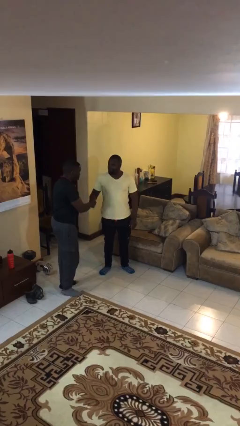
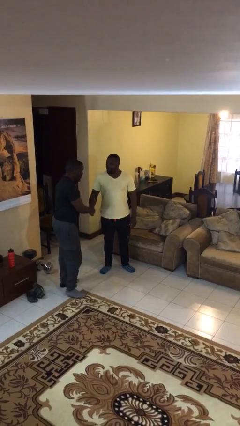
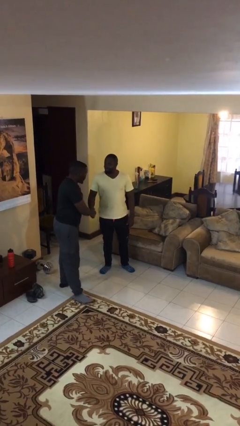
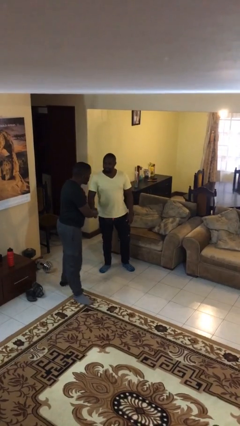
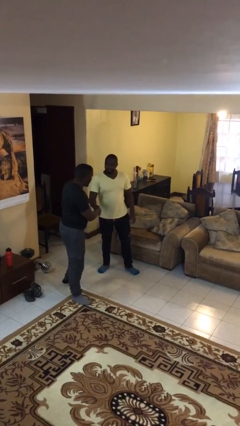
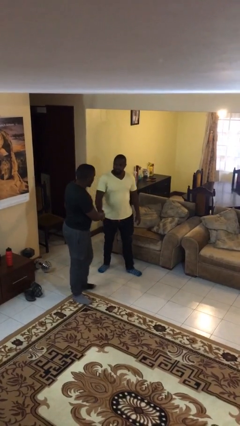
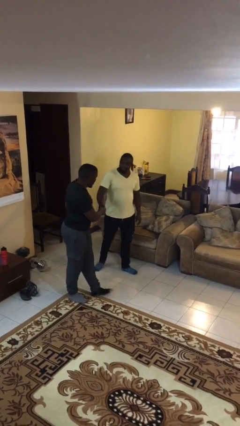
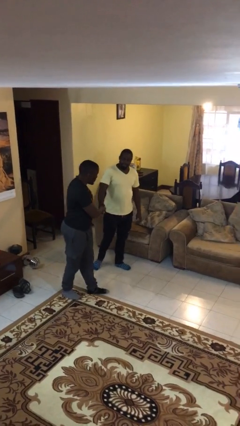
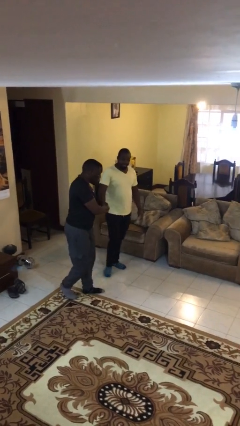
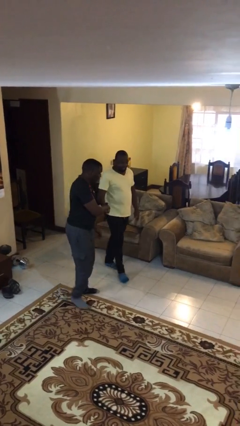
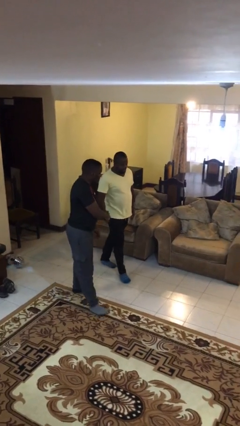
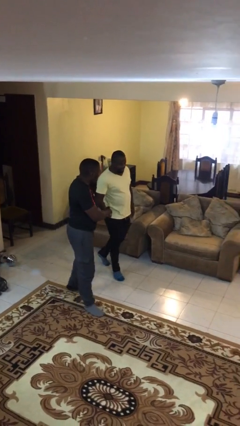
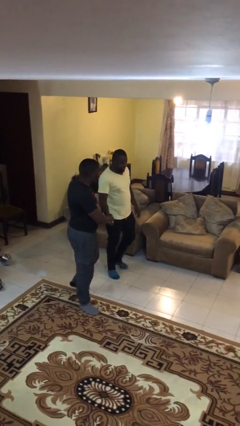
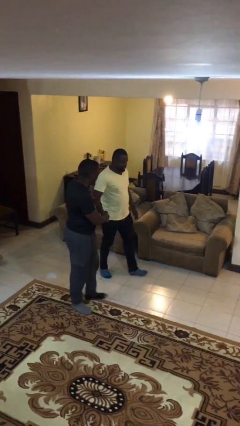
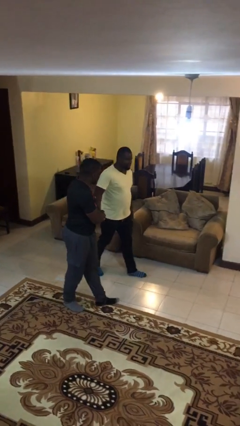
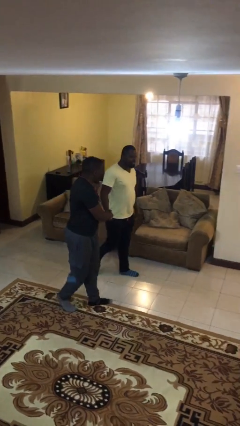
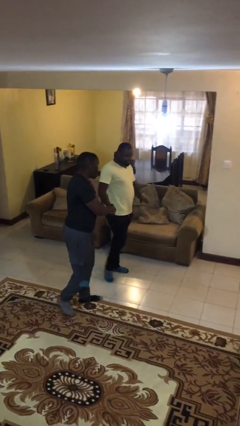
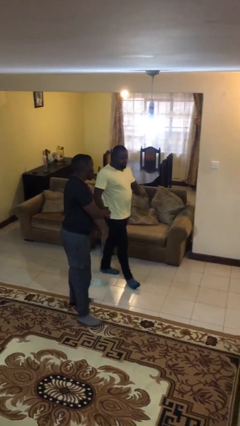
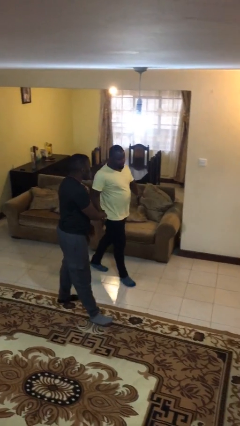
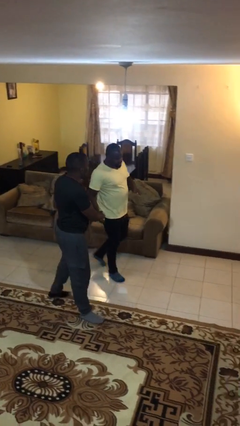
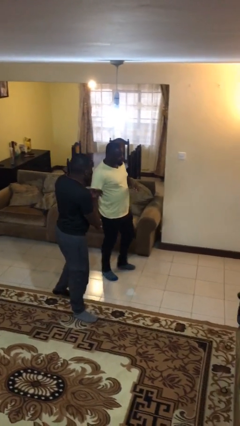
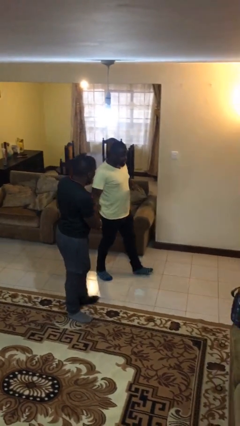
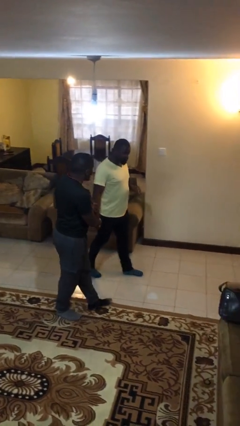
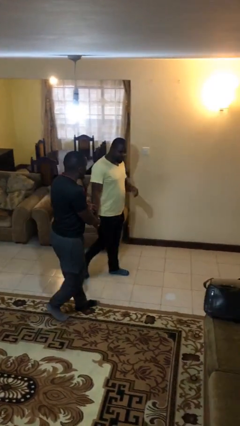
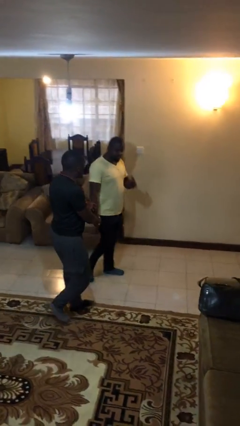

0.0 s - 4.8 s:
person holds hand

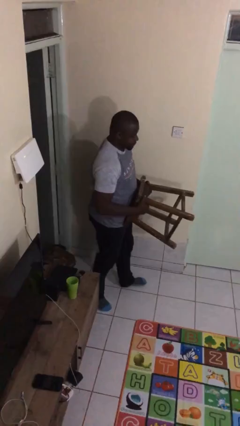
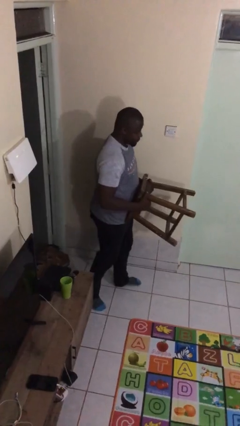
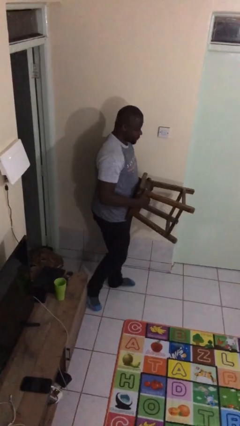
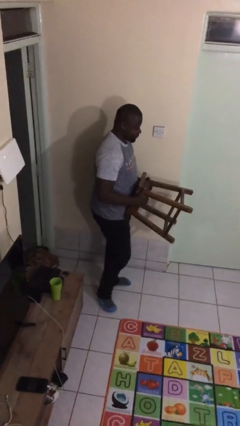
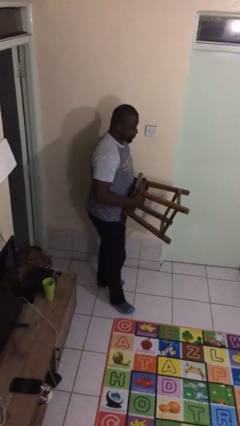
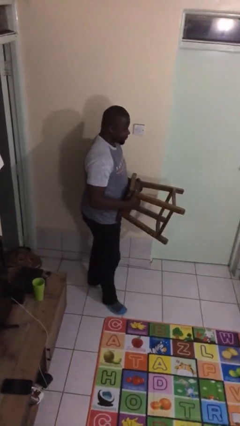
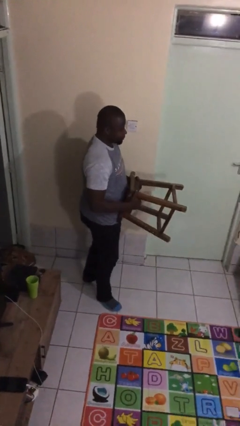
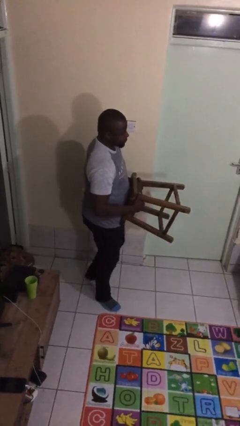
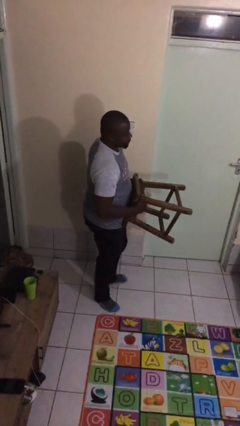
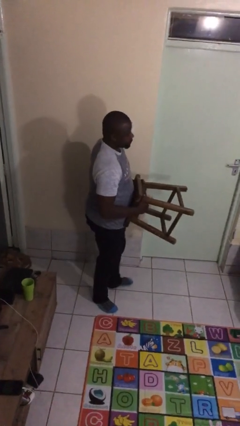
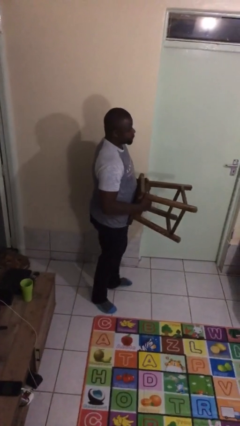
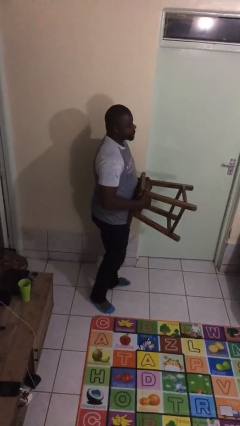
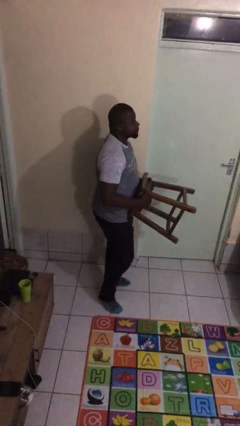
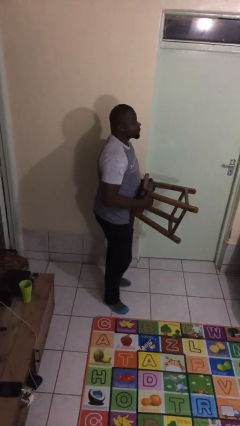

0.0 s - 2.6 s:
person carries furniture

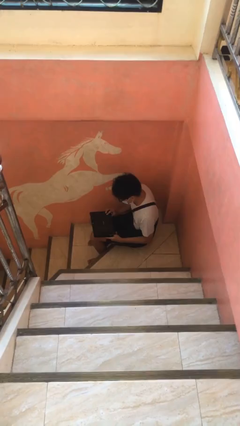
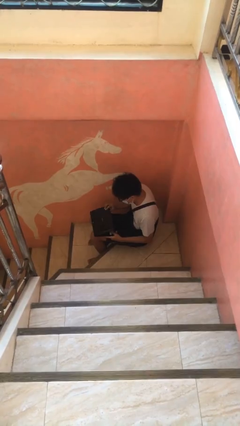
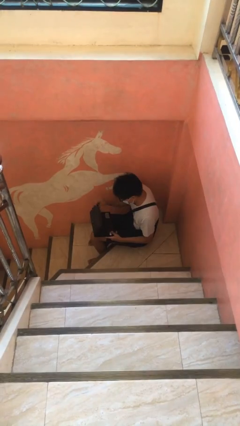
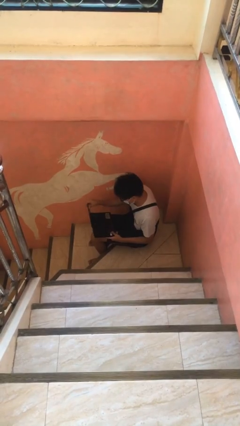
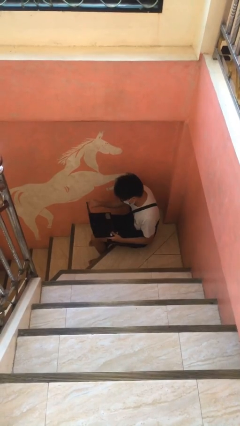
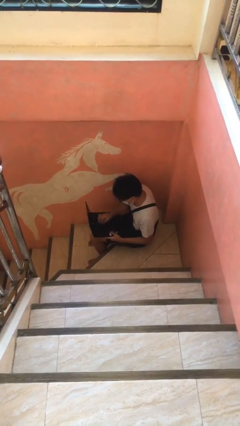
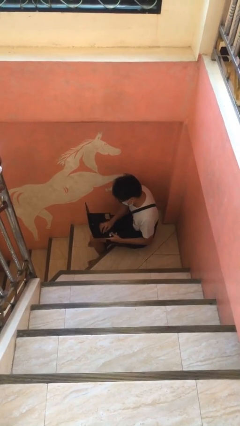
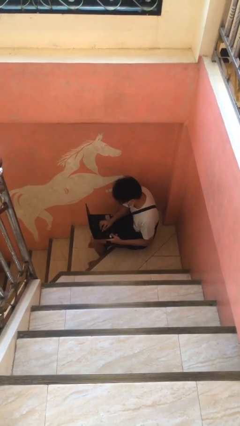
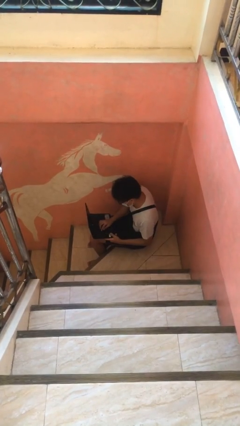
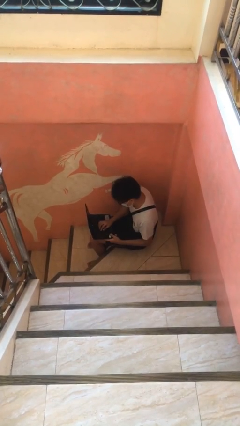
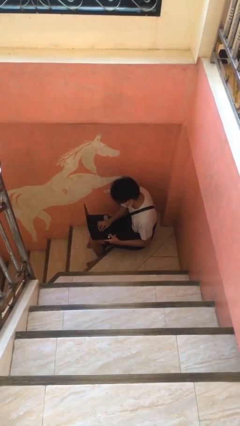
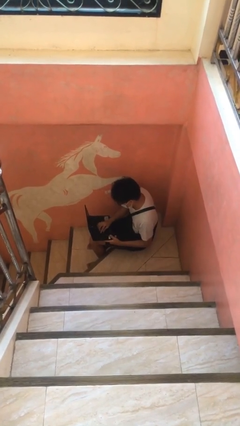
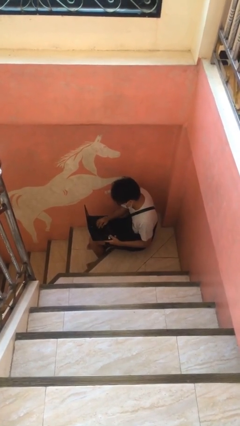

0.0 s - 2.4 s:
person interacts with laptop

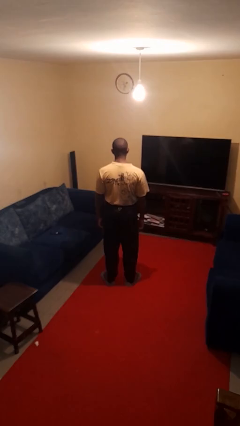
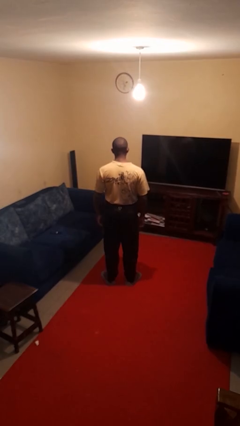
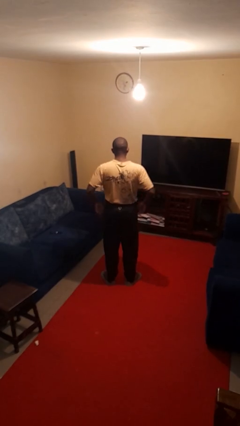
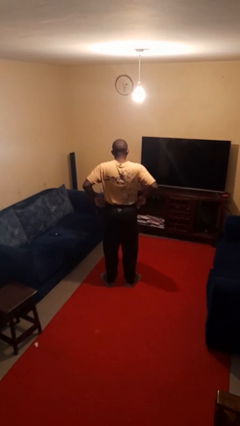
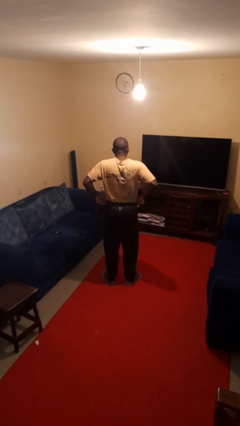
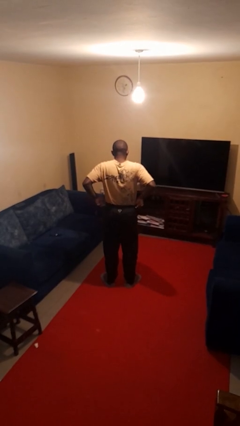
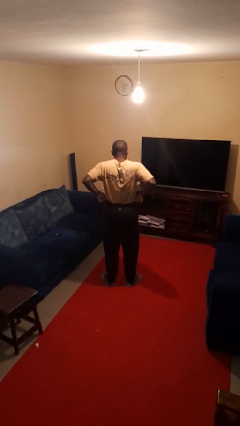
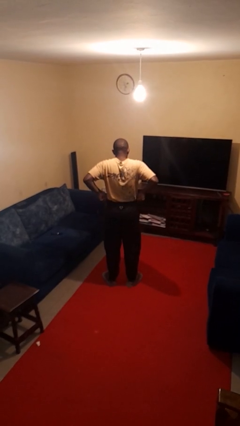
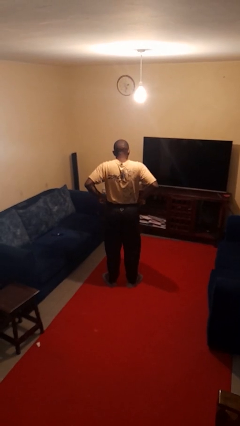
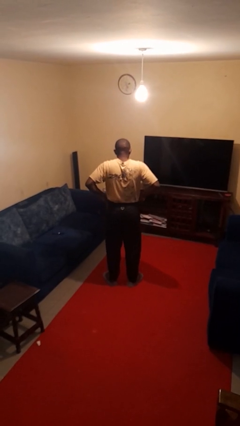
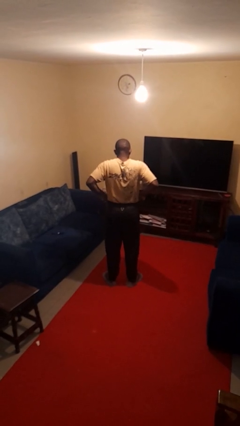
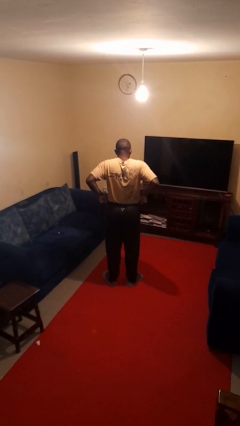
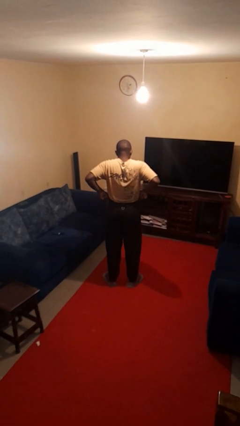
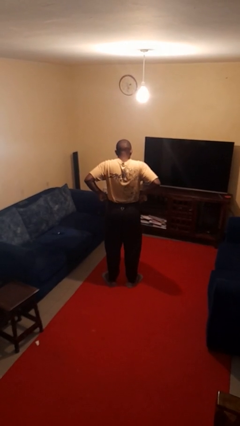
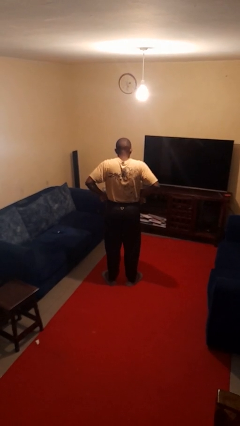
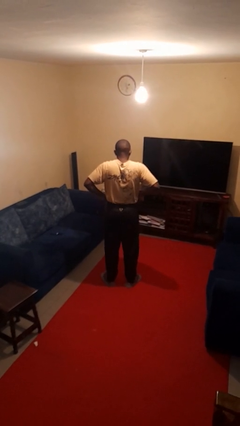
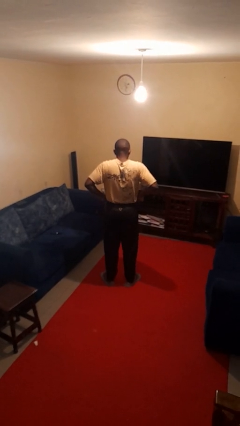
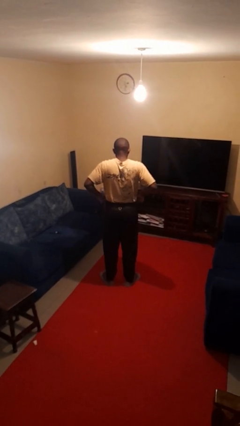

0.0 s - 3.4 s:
person hikes up pants

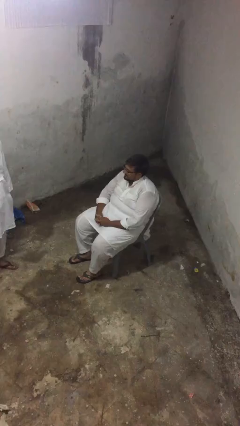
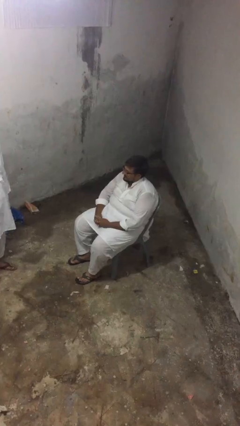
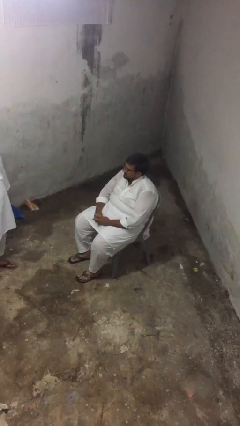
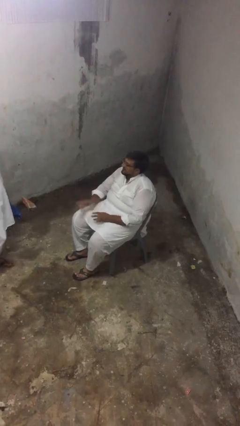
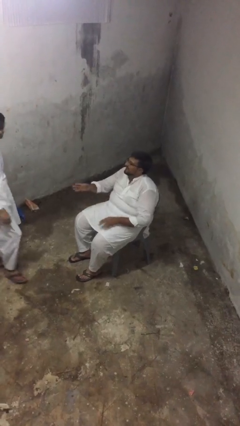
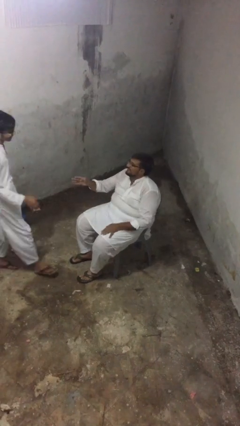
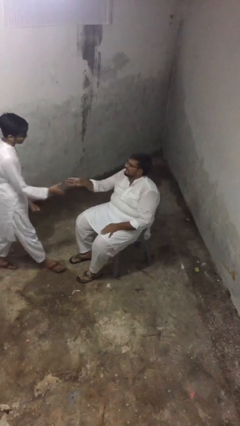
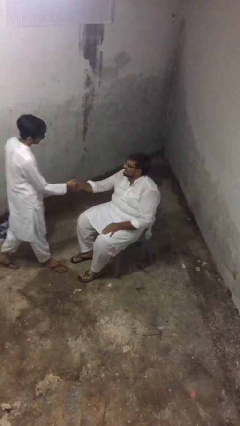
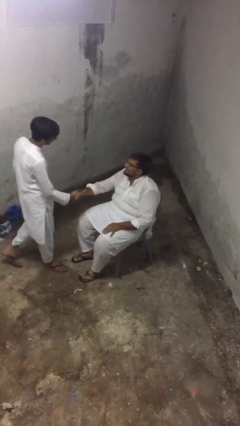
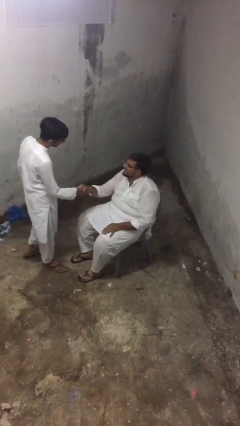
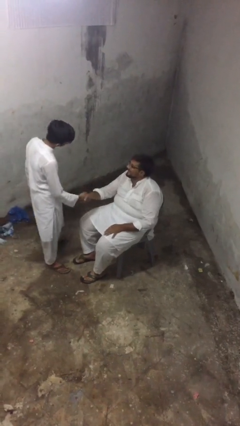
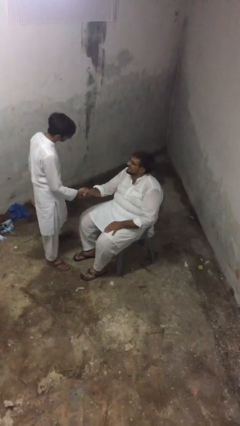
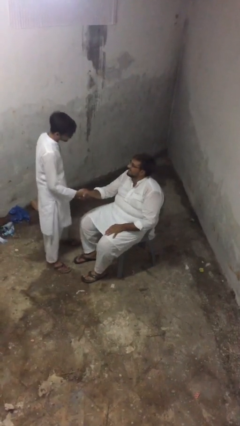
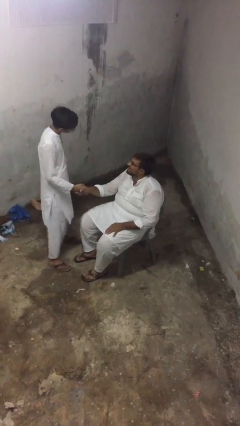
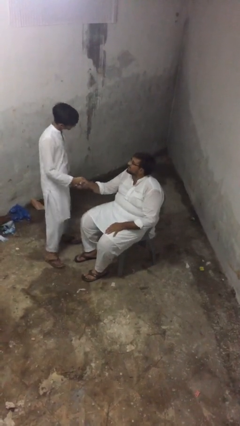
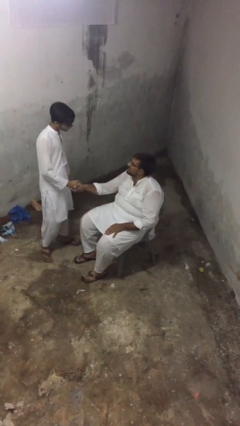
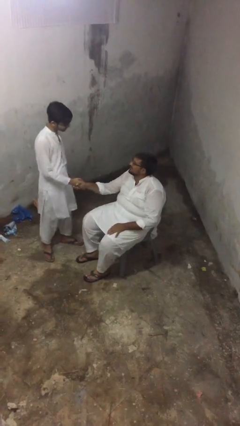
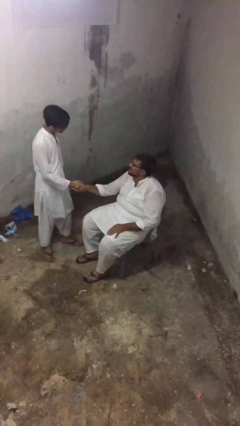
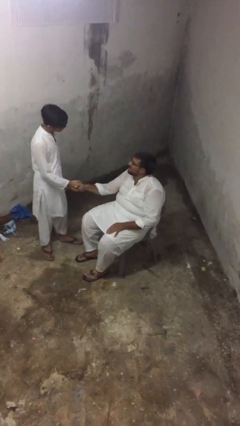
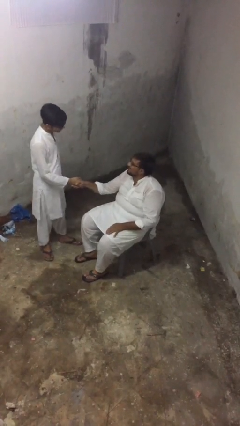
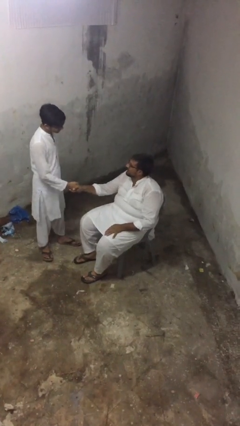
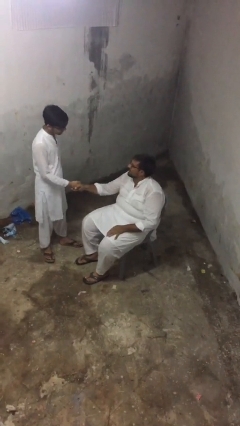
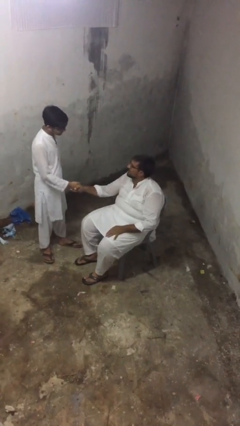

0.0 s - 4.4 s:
person shakes hand

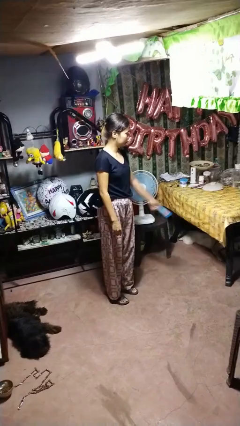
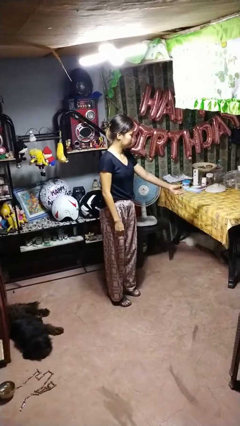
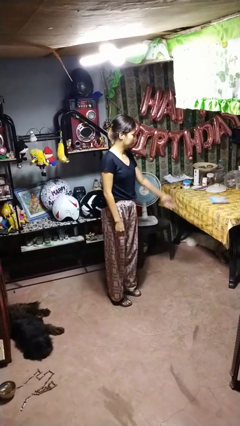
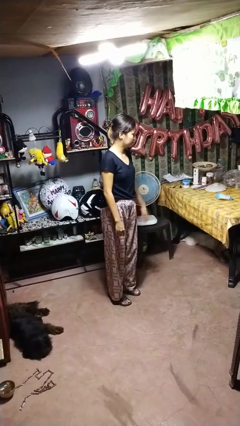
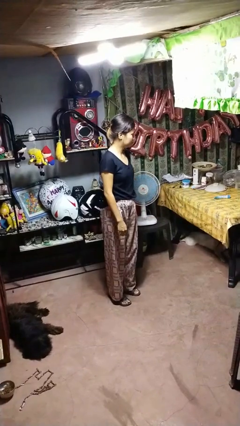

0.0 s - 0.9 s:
person throws object on table
